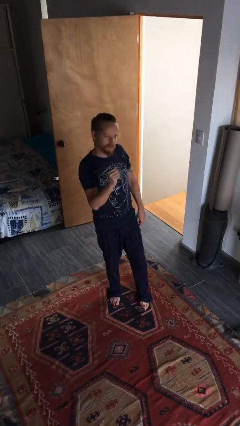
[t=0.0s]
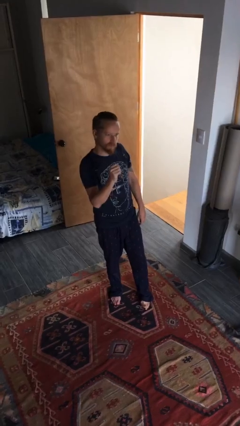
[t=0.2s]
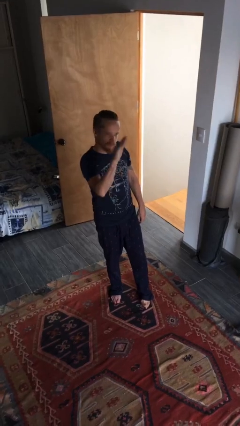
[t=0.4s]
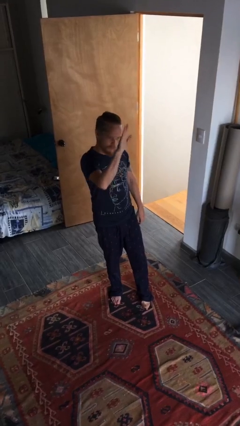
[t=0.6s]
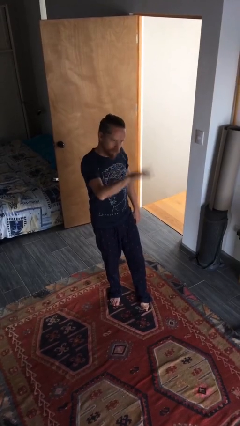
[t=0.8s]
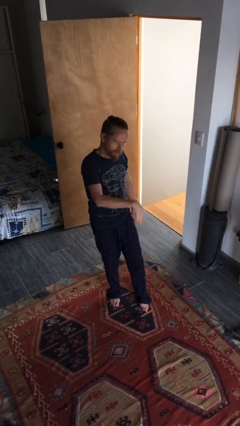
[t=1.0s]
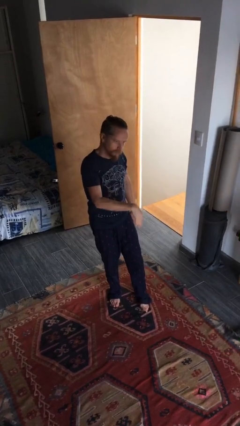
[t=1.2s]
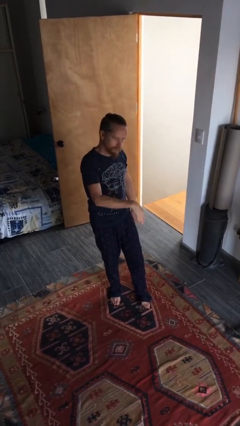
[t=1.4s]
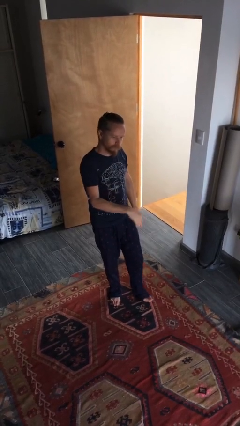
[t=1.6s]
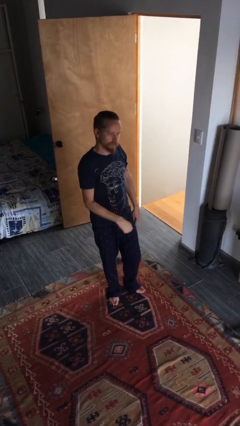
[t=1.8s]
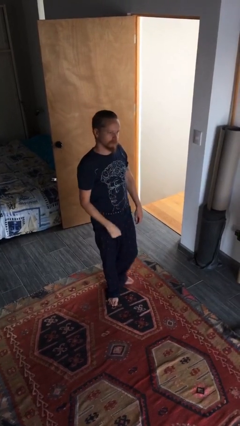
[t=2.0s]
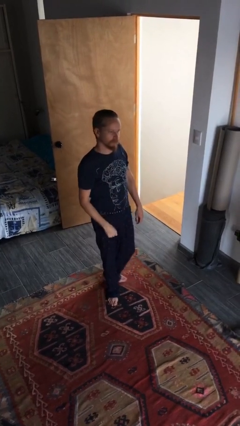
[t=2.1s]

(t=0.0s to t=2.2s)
person gestures swipe down

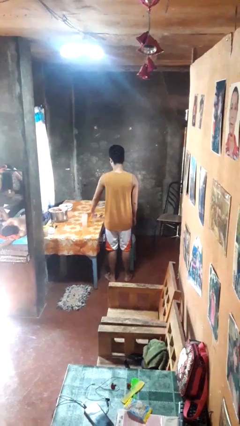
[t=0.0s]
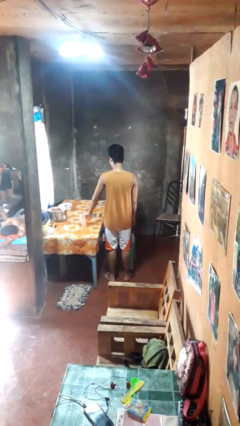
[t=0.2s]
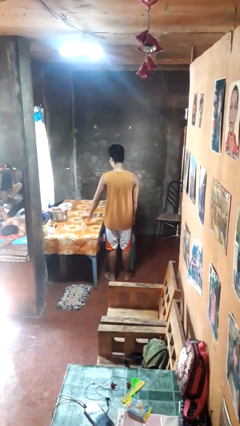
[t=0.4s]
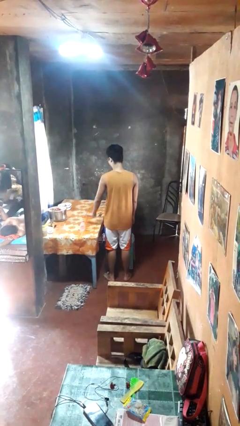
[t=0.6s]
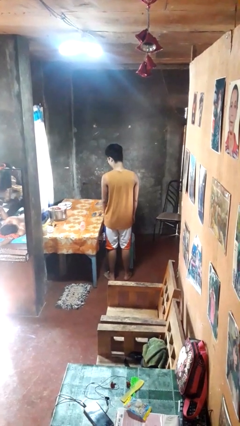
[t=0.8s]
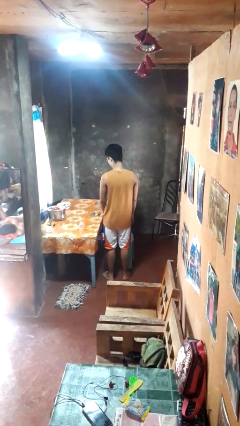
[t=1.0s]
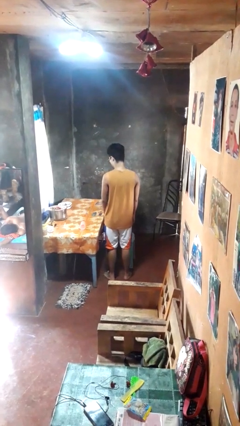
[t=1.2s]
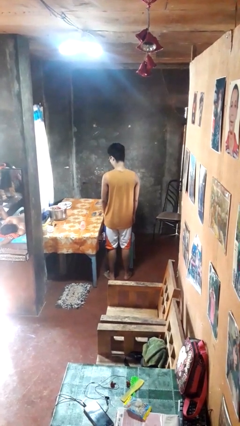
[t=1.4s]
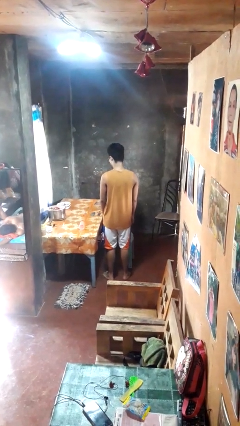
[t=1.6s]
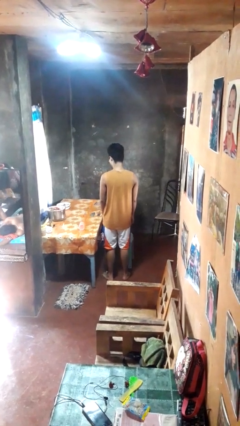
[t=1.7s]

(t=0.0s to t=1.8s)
person spills on table

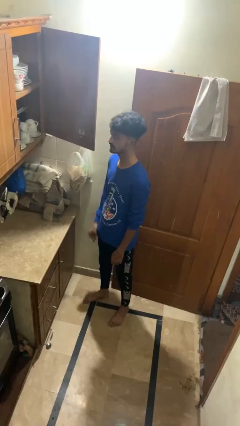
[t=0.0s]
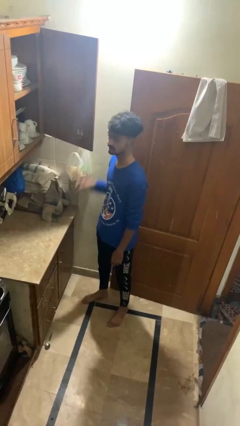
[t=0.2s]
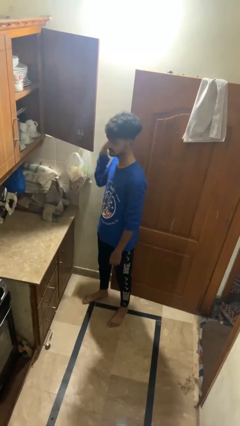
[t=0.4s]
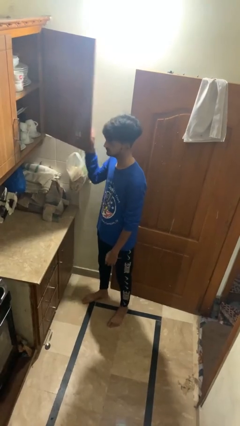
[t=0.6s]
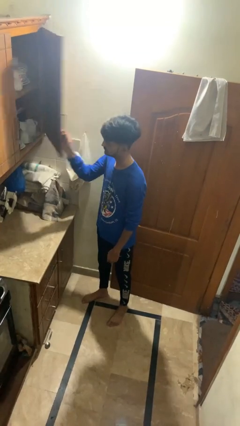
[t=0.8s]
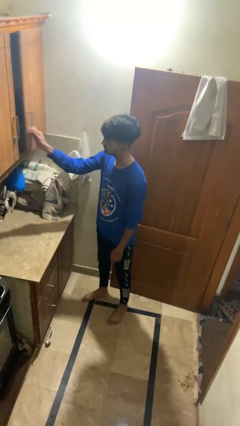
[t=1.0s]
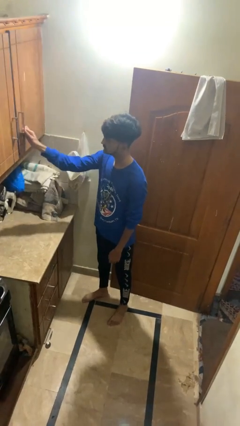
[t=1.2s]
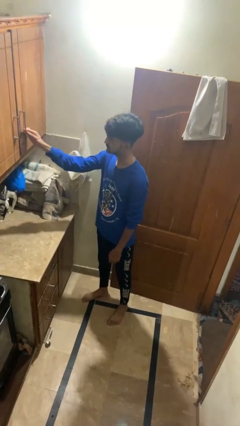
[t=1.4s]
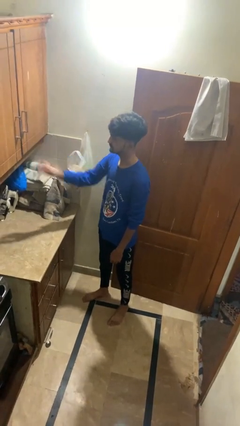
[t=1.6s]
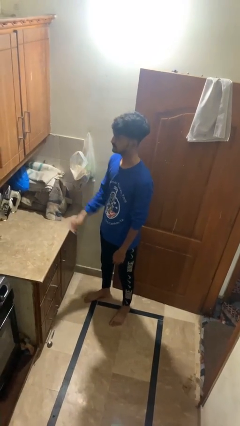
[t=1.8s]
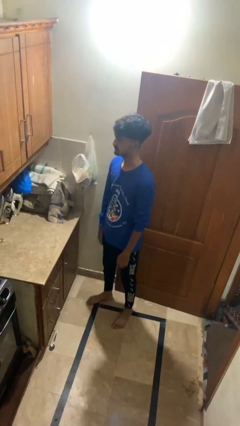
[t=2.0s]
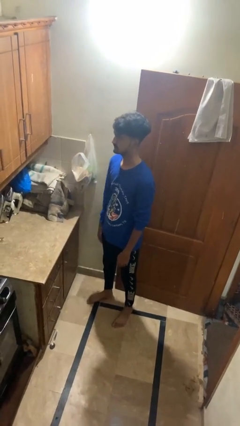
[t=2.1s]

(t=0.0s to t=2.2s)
person closes cabinet

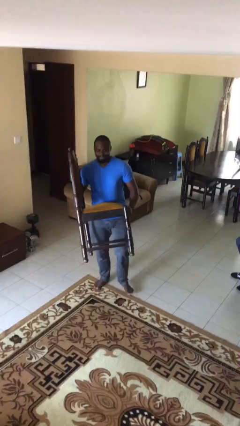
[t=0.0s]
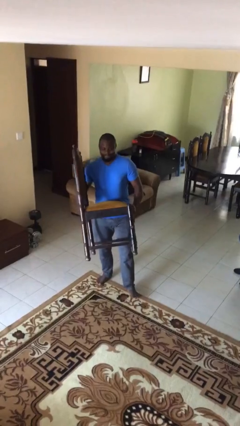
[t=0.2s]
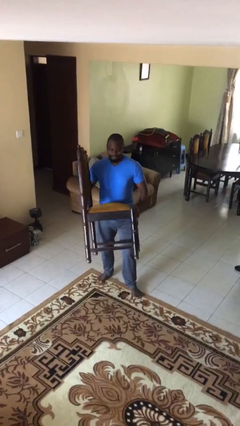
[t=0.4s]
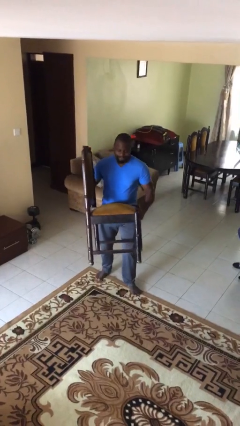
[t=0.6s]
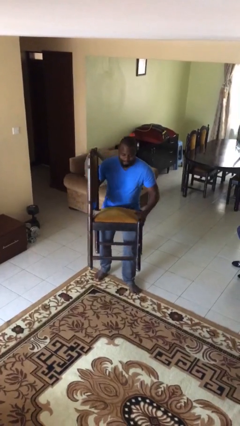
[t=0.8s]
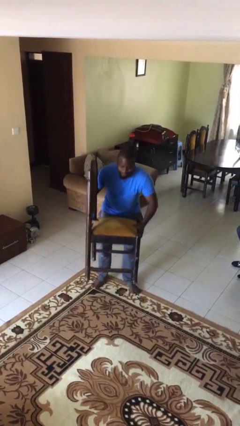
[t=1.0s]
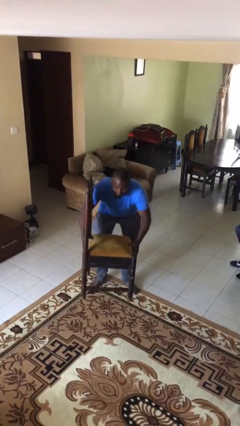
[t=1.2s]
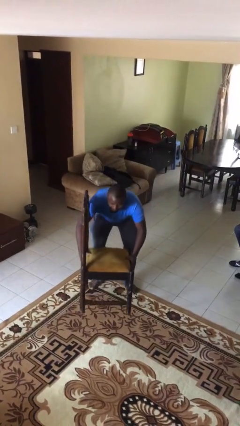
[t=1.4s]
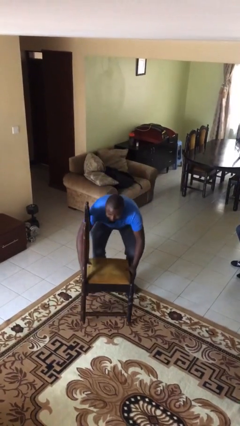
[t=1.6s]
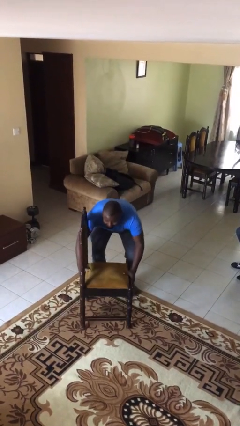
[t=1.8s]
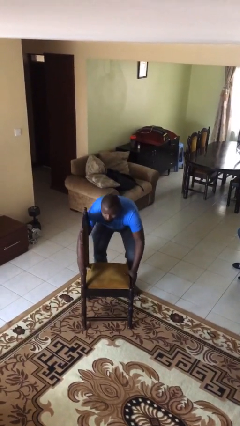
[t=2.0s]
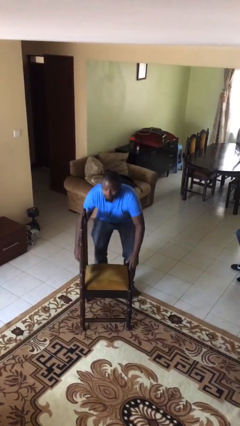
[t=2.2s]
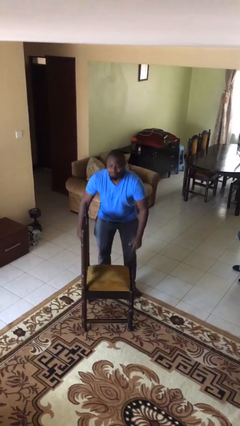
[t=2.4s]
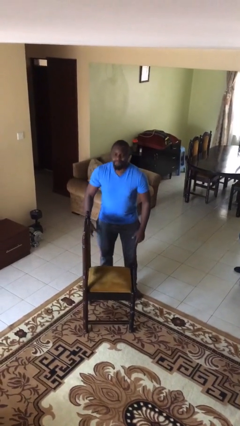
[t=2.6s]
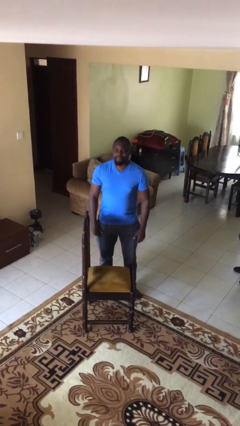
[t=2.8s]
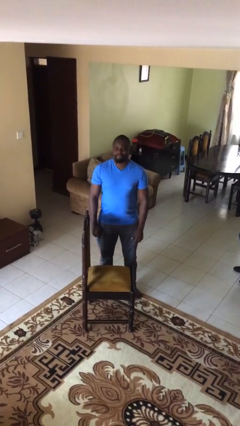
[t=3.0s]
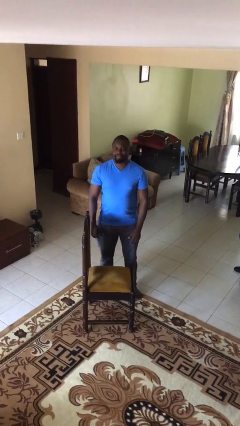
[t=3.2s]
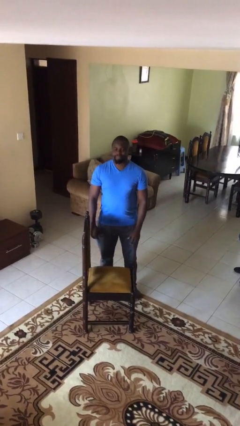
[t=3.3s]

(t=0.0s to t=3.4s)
person puts down object on floor

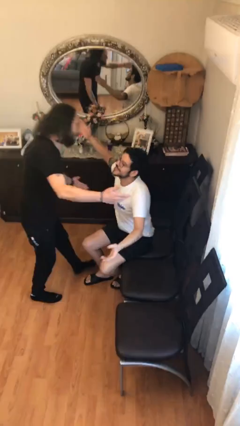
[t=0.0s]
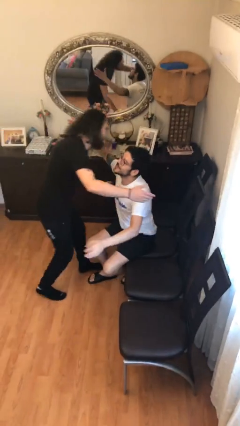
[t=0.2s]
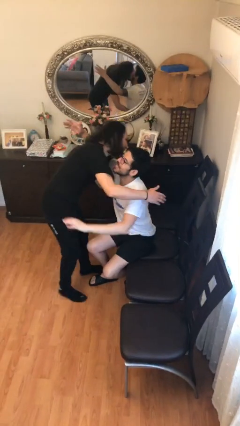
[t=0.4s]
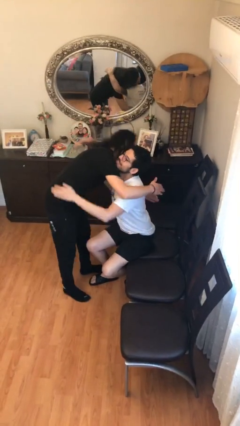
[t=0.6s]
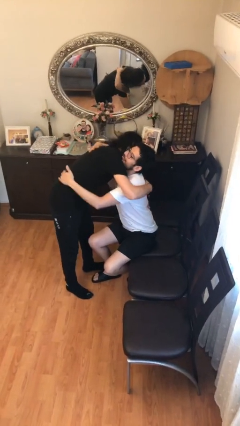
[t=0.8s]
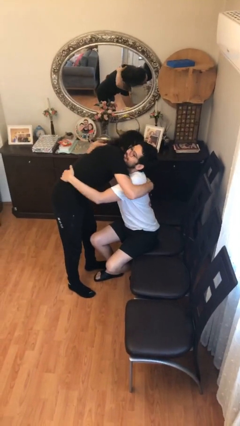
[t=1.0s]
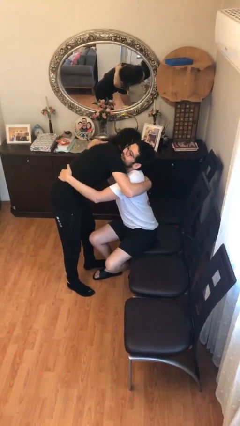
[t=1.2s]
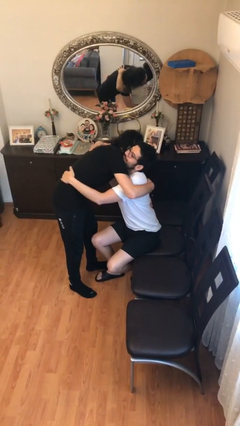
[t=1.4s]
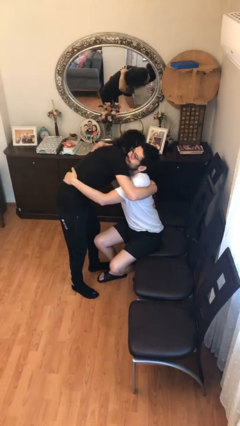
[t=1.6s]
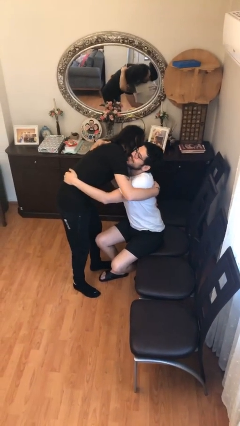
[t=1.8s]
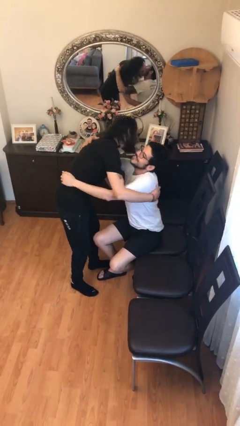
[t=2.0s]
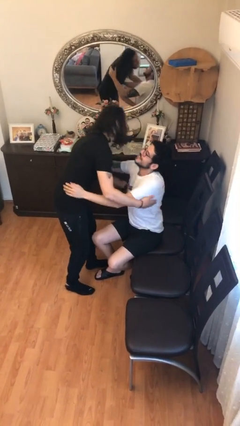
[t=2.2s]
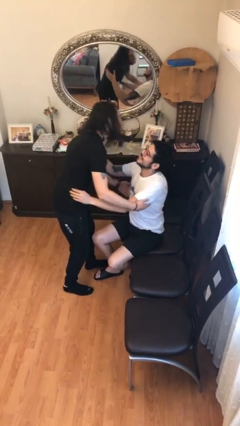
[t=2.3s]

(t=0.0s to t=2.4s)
person embraces person

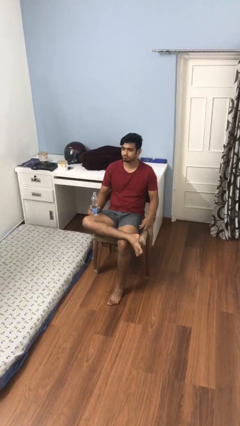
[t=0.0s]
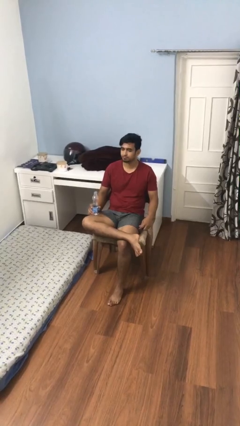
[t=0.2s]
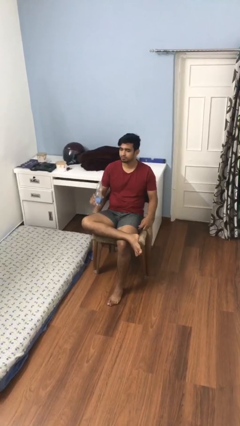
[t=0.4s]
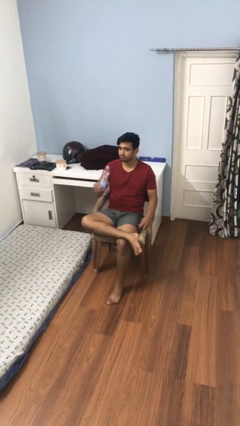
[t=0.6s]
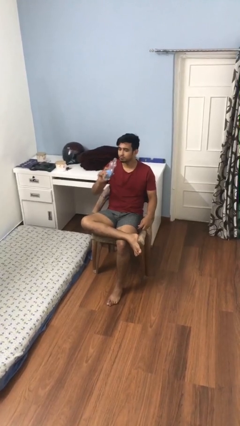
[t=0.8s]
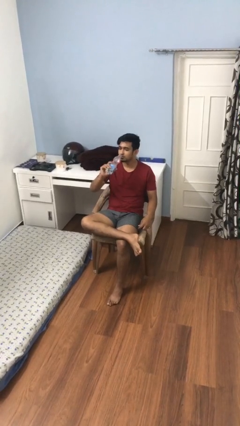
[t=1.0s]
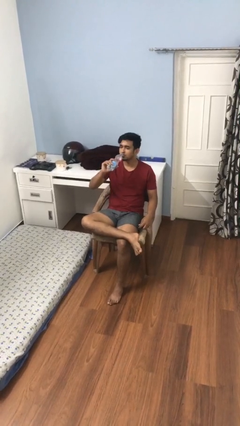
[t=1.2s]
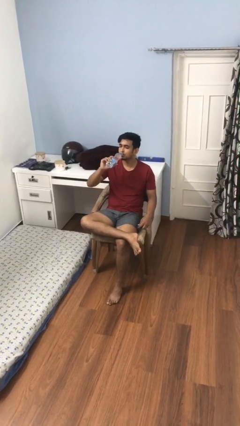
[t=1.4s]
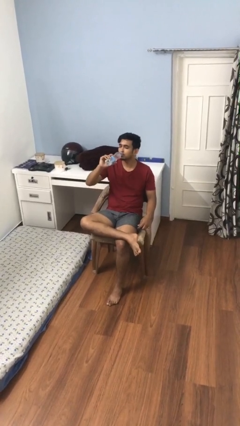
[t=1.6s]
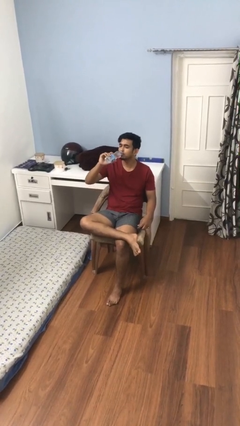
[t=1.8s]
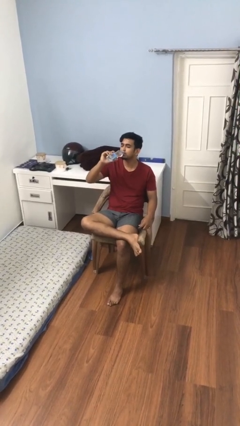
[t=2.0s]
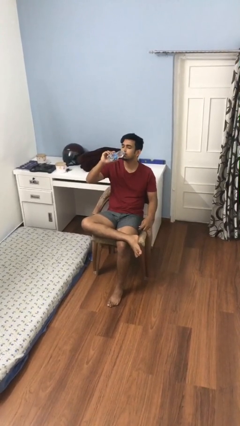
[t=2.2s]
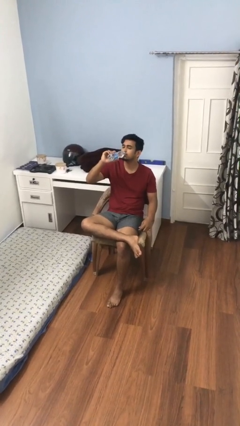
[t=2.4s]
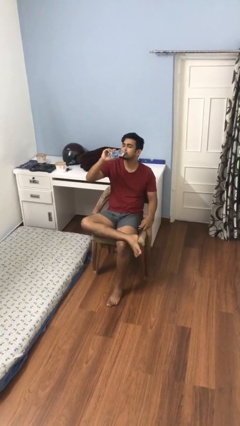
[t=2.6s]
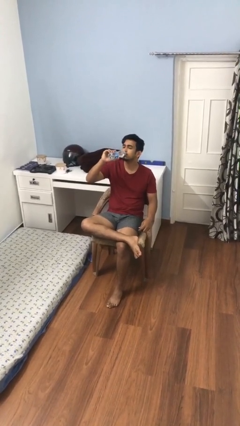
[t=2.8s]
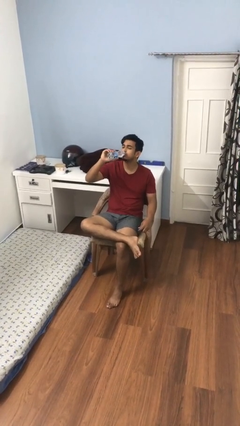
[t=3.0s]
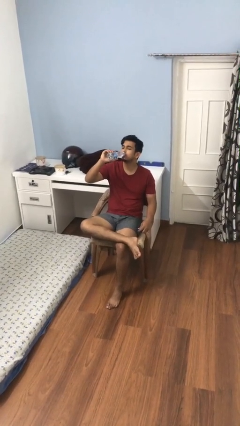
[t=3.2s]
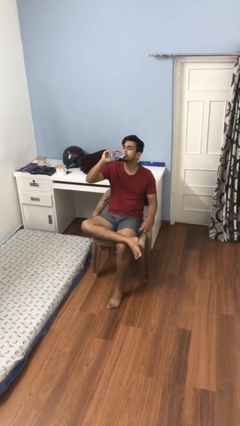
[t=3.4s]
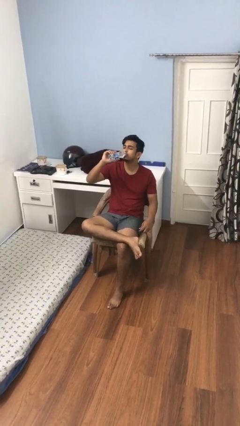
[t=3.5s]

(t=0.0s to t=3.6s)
person drinks from bottle

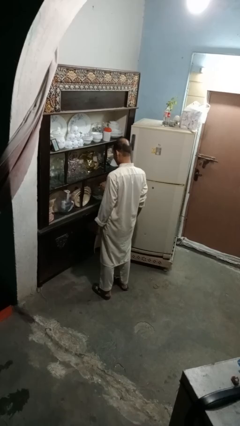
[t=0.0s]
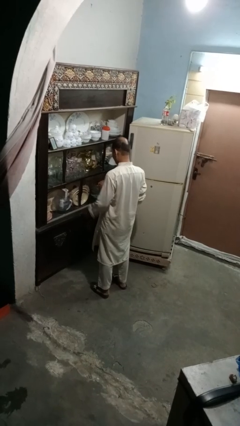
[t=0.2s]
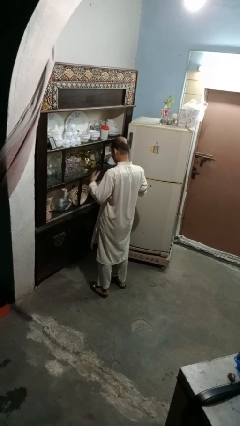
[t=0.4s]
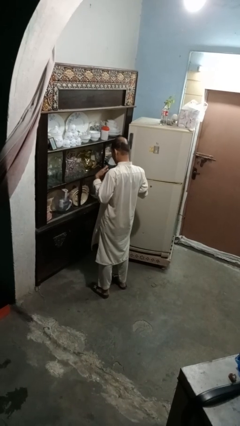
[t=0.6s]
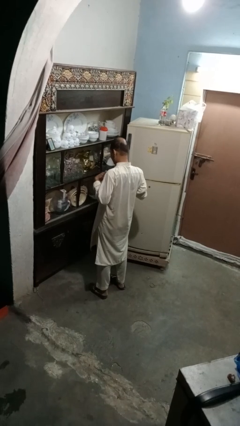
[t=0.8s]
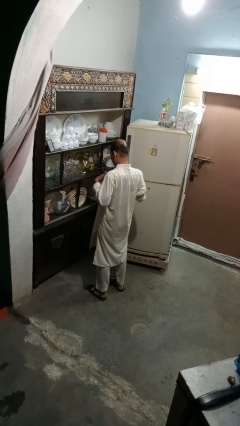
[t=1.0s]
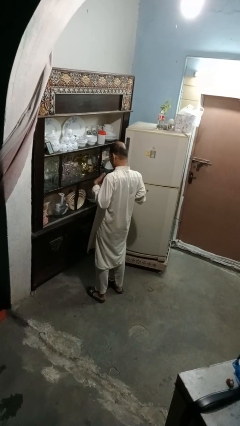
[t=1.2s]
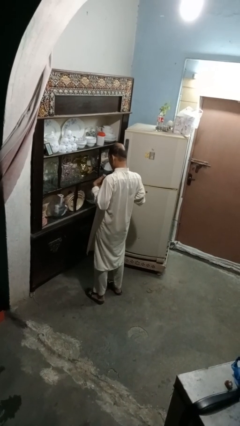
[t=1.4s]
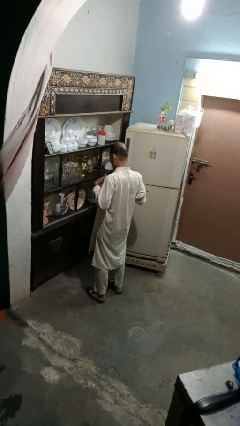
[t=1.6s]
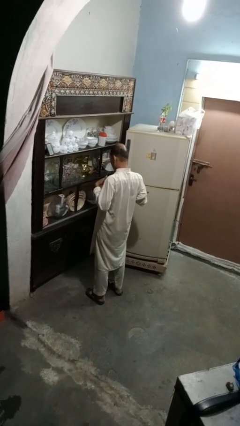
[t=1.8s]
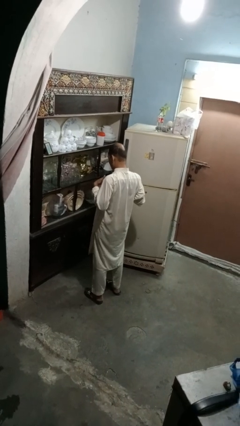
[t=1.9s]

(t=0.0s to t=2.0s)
person drums on chest
